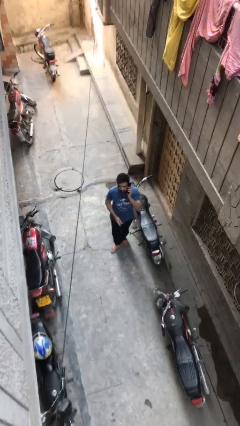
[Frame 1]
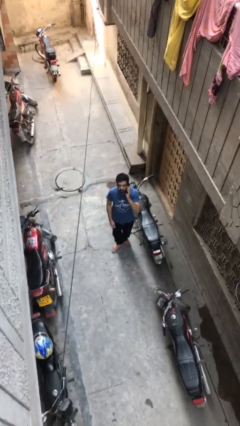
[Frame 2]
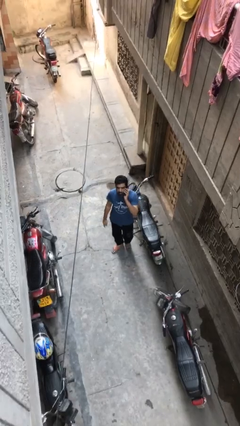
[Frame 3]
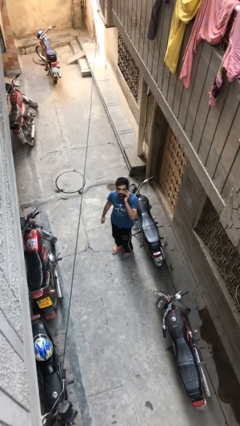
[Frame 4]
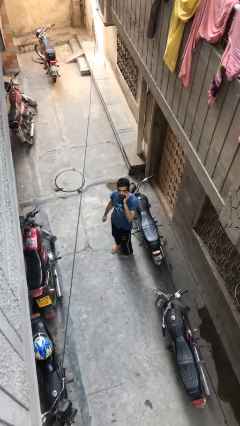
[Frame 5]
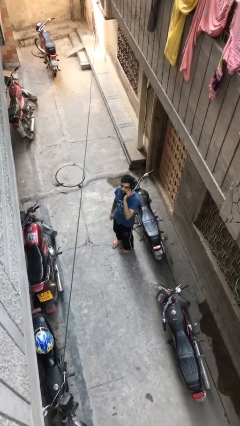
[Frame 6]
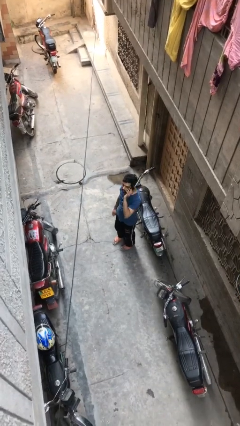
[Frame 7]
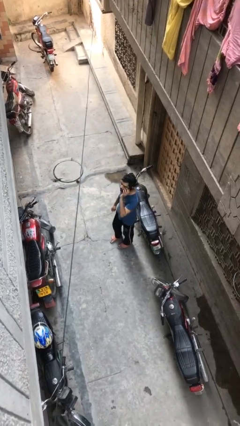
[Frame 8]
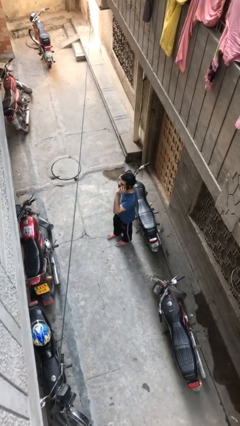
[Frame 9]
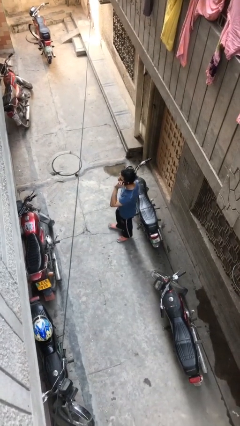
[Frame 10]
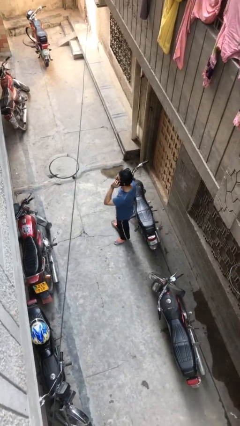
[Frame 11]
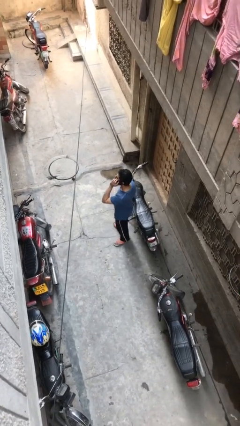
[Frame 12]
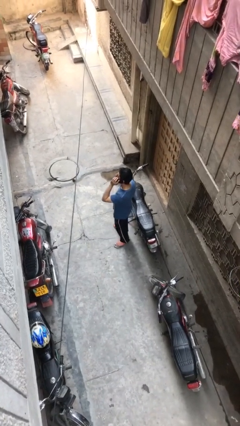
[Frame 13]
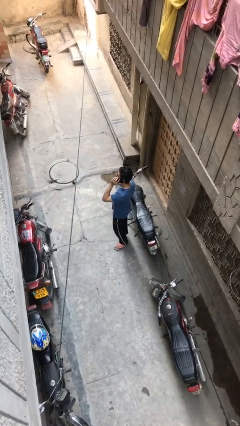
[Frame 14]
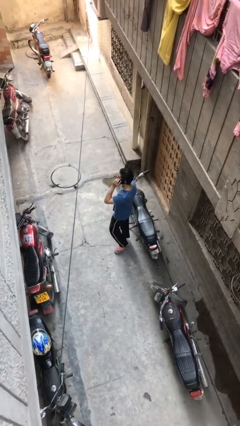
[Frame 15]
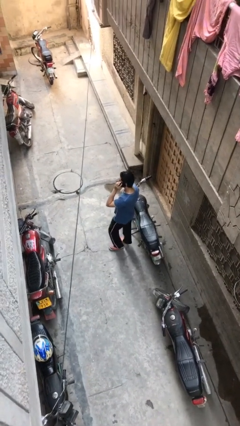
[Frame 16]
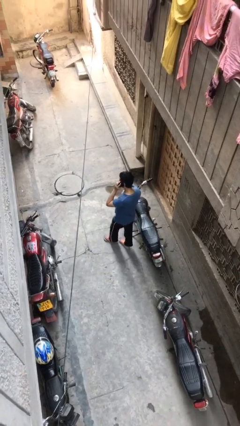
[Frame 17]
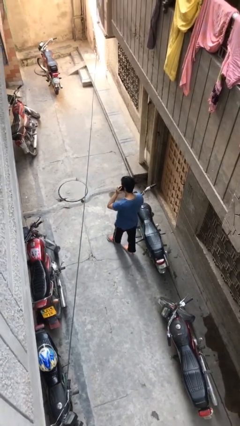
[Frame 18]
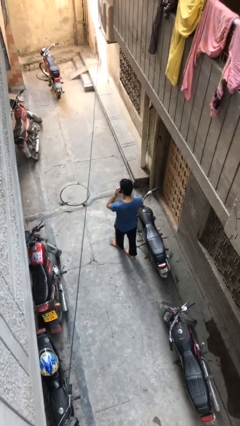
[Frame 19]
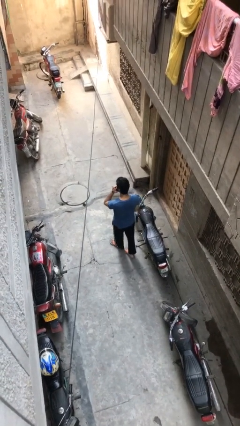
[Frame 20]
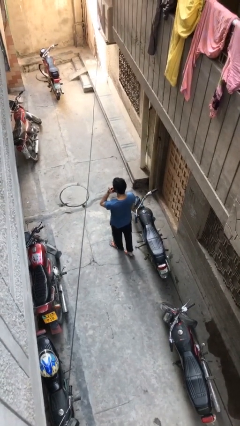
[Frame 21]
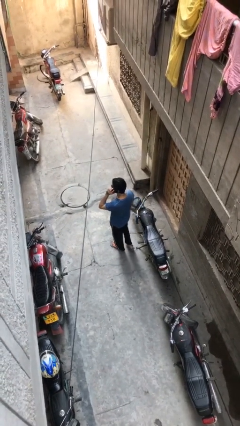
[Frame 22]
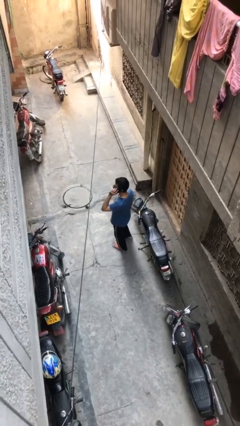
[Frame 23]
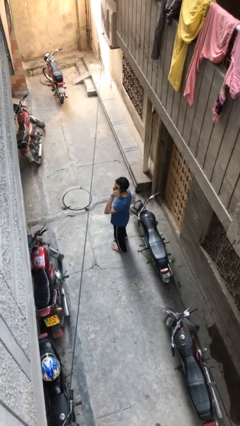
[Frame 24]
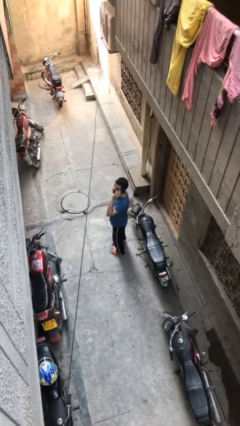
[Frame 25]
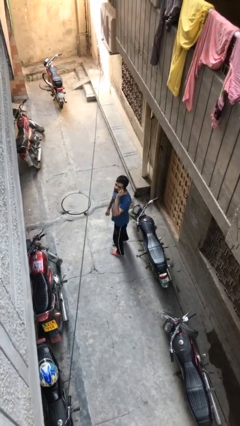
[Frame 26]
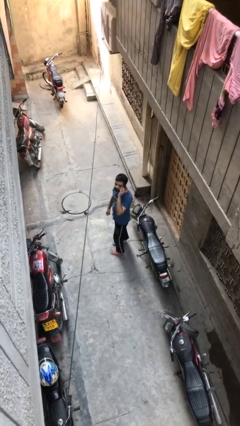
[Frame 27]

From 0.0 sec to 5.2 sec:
person talks on phone

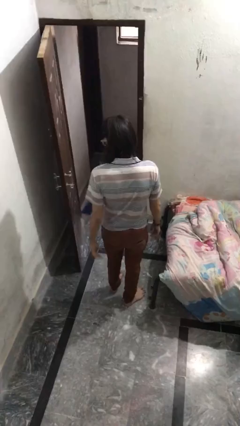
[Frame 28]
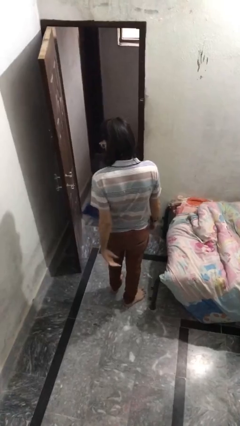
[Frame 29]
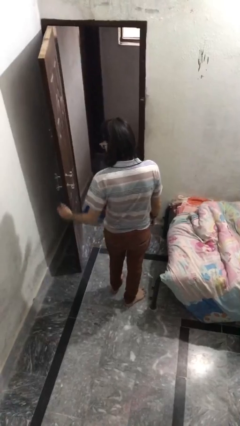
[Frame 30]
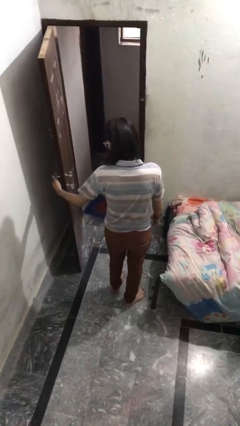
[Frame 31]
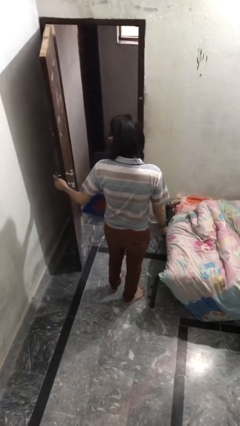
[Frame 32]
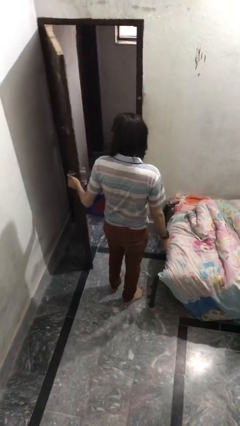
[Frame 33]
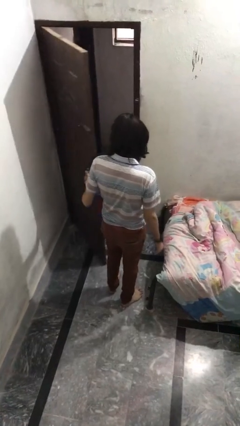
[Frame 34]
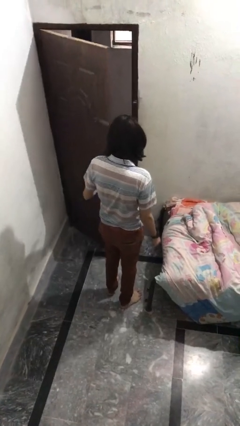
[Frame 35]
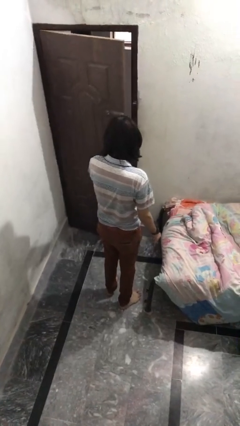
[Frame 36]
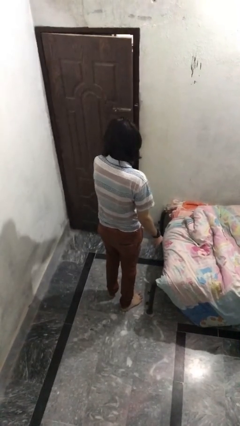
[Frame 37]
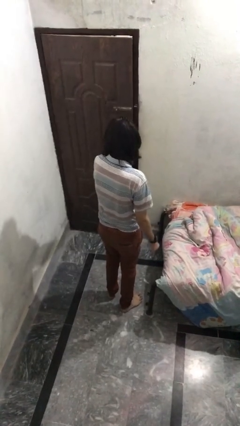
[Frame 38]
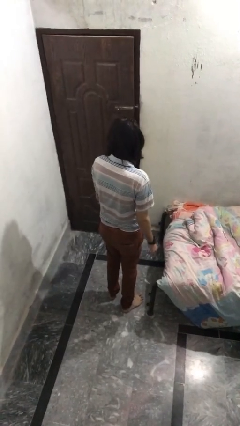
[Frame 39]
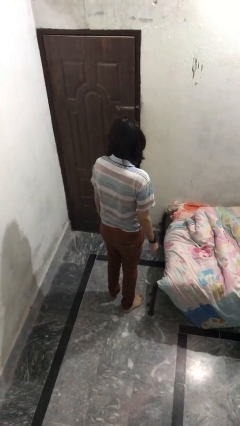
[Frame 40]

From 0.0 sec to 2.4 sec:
person closes facility door

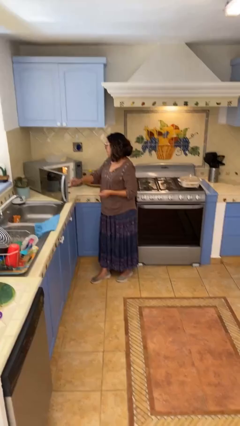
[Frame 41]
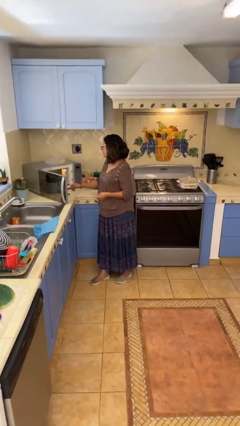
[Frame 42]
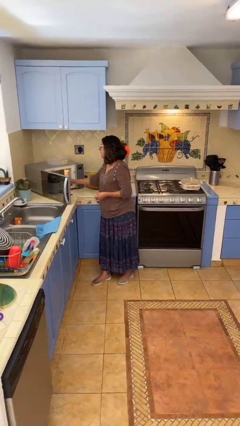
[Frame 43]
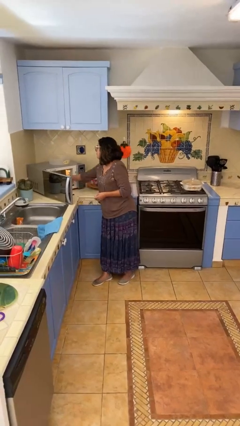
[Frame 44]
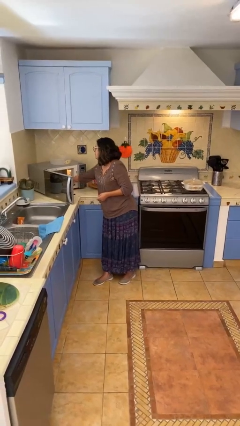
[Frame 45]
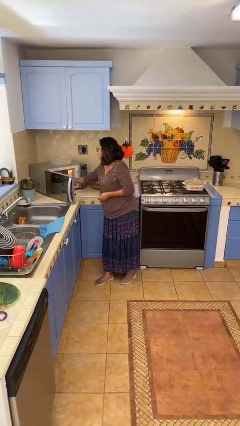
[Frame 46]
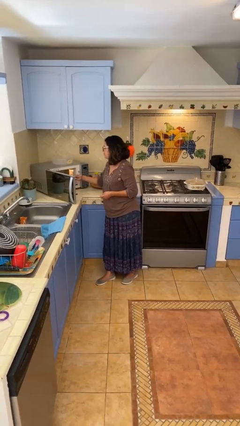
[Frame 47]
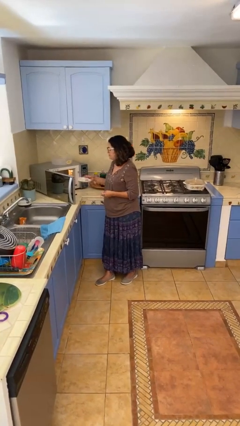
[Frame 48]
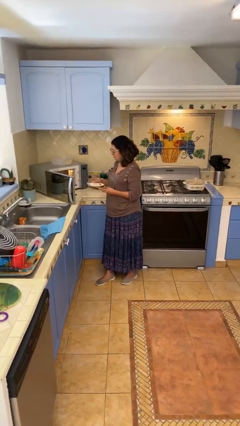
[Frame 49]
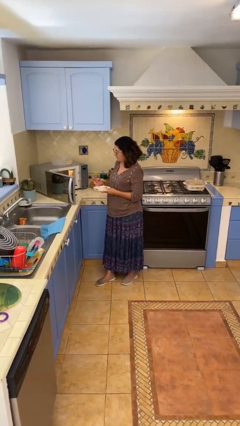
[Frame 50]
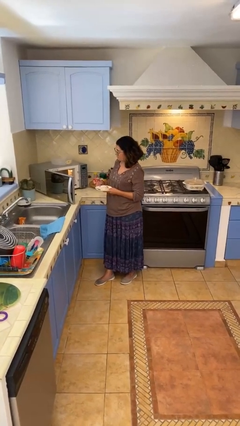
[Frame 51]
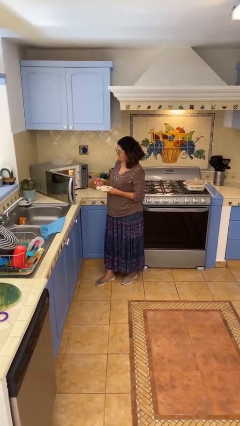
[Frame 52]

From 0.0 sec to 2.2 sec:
person takes object from microwave

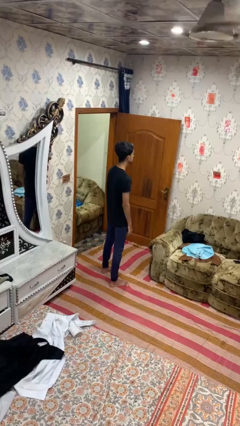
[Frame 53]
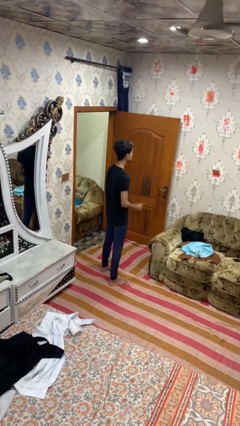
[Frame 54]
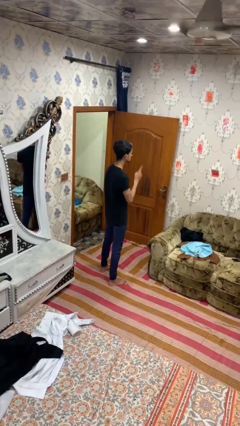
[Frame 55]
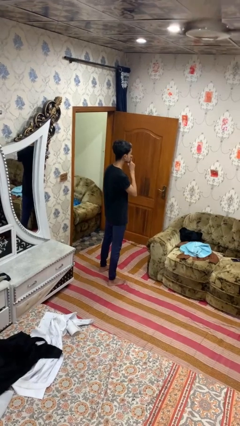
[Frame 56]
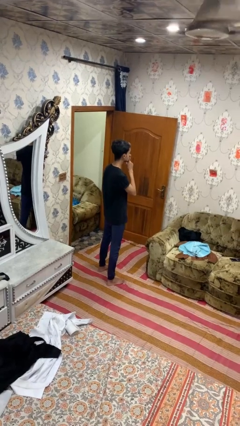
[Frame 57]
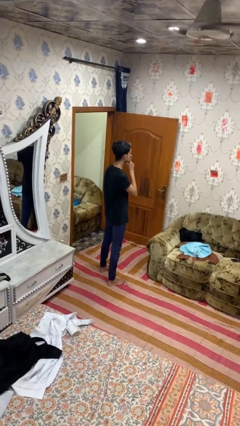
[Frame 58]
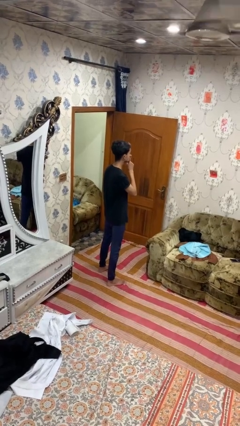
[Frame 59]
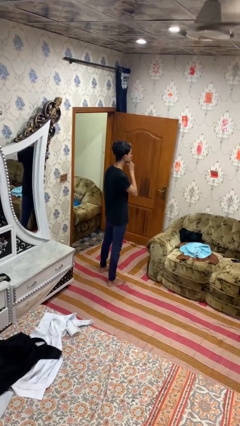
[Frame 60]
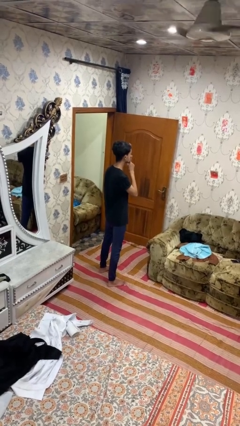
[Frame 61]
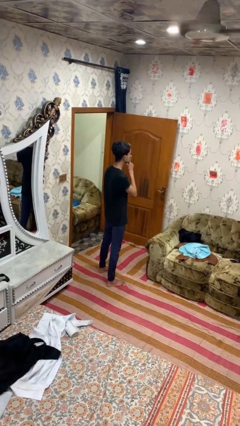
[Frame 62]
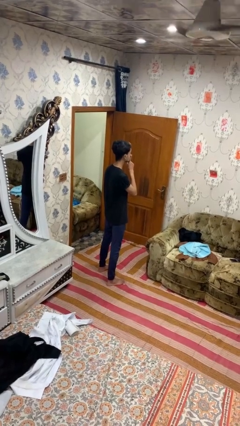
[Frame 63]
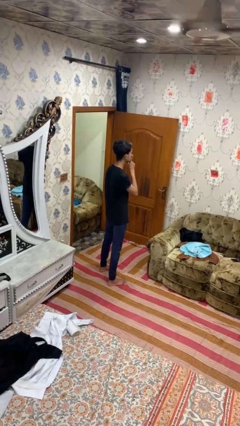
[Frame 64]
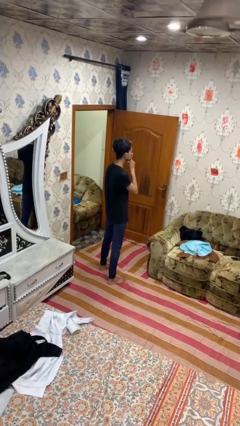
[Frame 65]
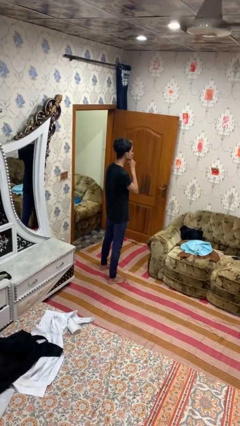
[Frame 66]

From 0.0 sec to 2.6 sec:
person gestures be quiet

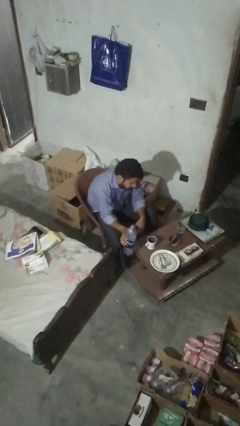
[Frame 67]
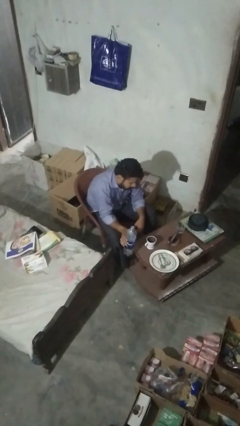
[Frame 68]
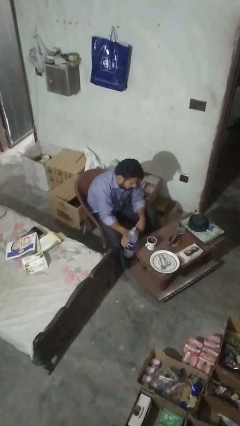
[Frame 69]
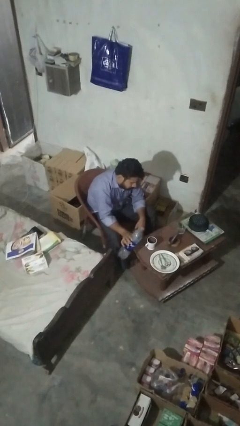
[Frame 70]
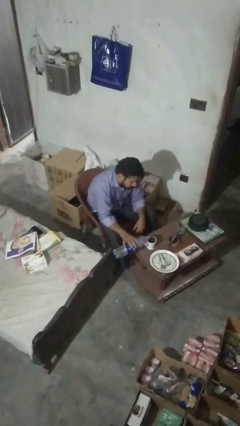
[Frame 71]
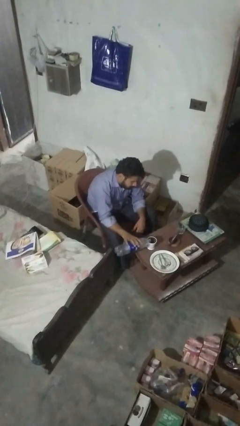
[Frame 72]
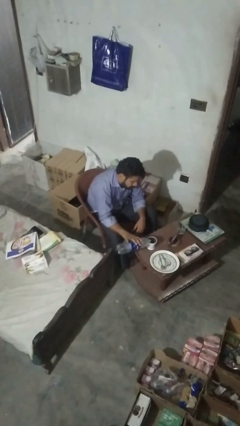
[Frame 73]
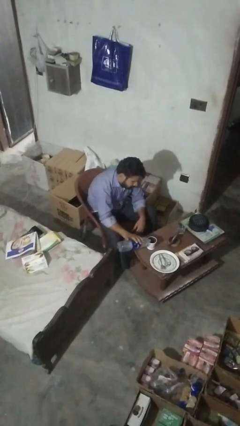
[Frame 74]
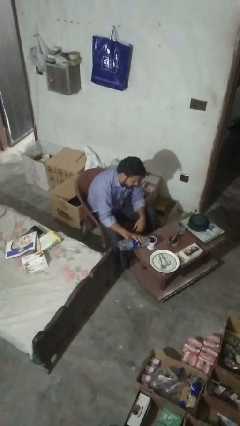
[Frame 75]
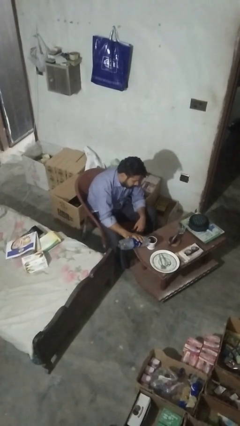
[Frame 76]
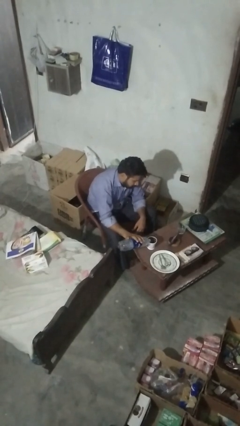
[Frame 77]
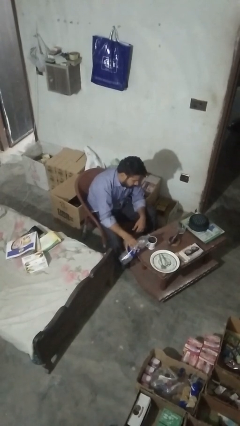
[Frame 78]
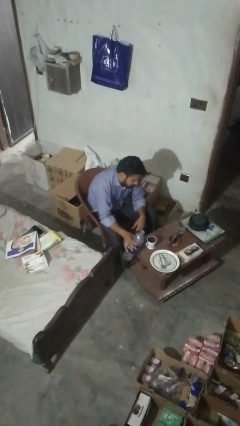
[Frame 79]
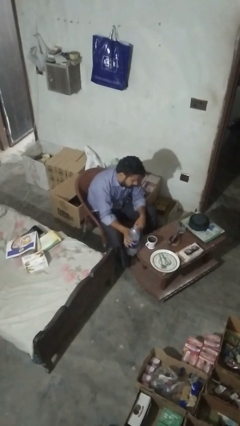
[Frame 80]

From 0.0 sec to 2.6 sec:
person pours liquid into cup

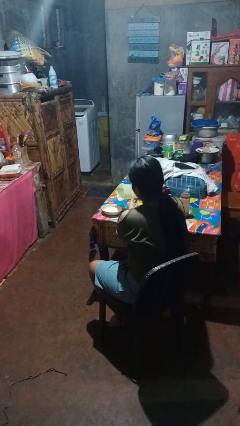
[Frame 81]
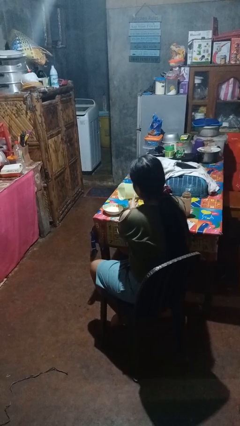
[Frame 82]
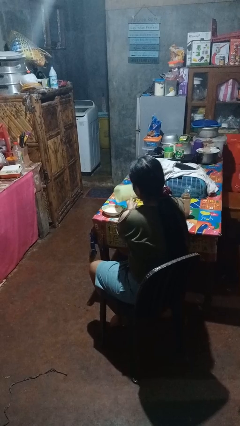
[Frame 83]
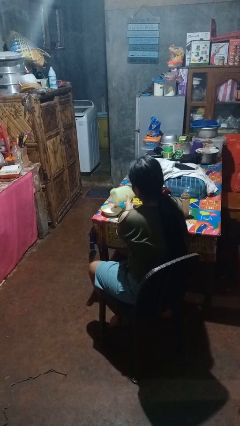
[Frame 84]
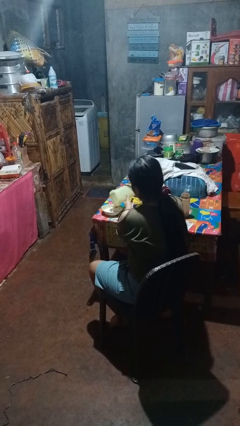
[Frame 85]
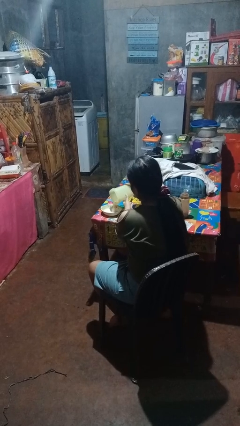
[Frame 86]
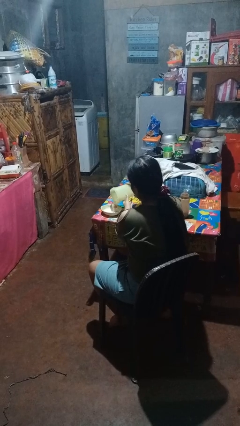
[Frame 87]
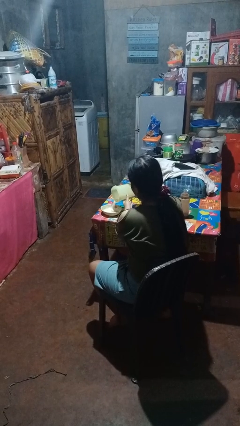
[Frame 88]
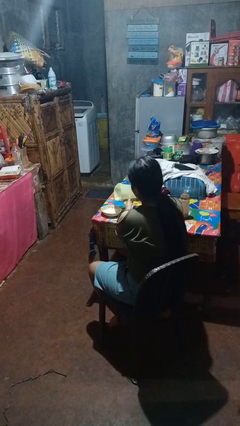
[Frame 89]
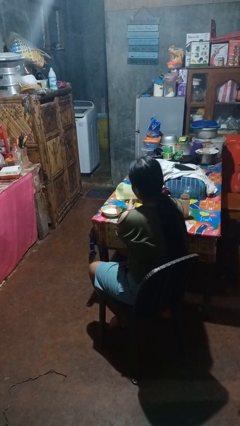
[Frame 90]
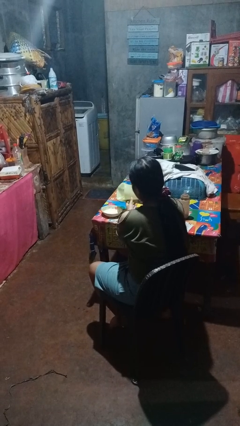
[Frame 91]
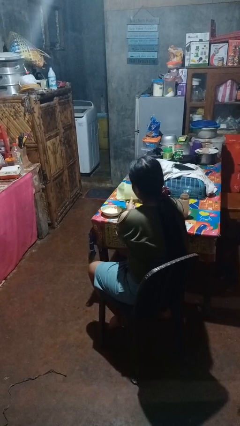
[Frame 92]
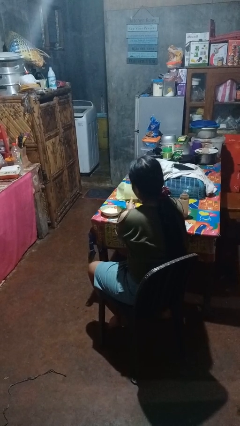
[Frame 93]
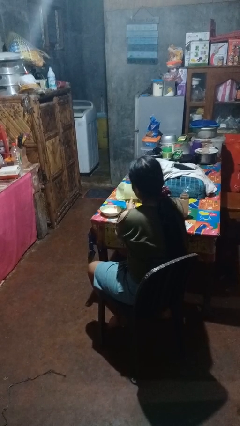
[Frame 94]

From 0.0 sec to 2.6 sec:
person pours into bowl
